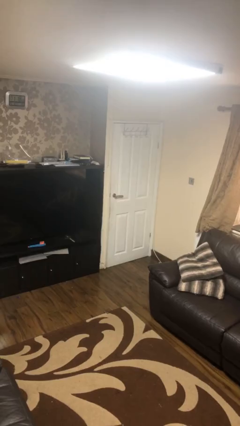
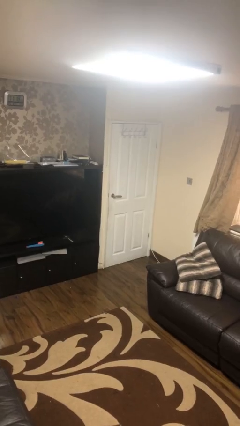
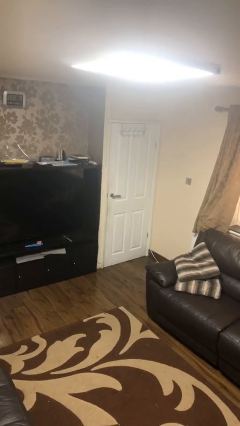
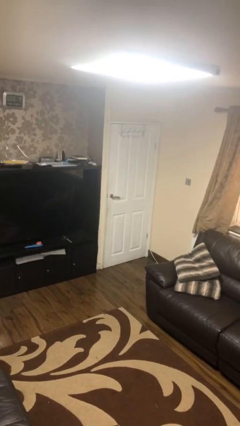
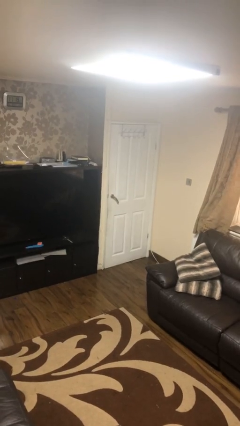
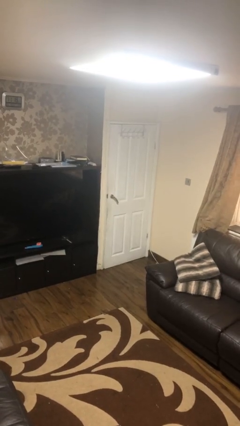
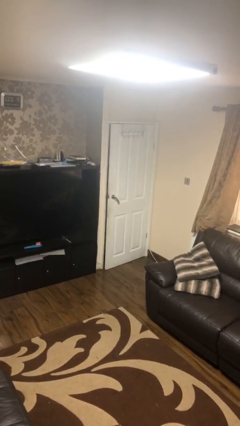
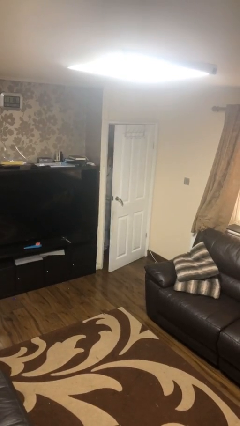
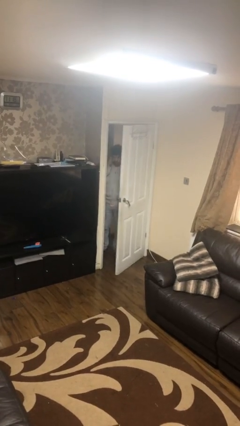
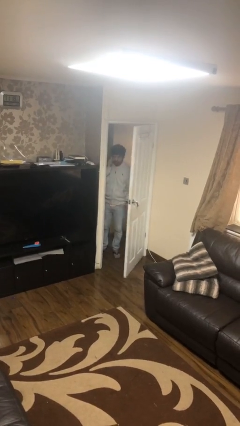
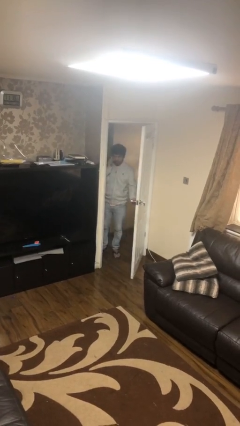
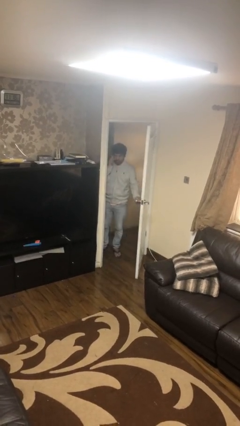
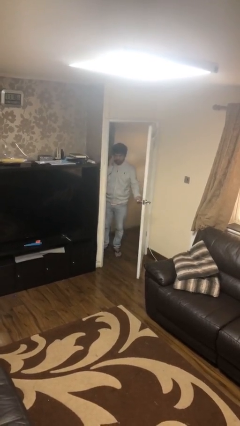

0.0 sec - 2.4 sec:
person opens facility door

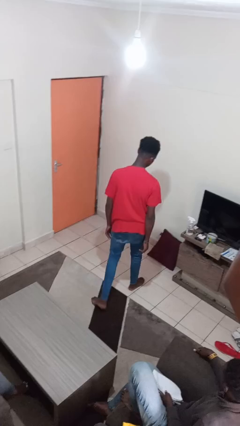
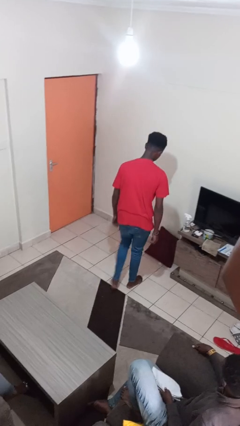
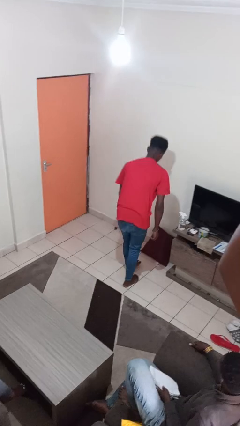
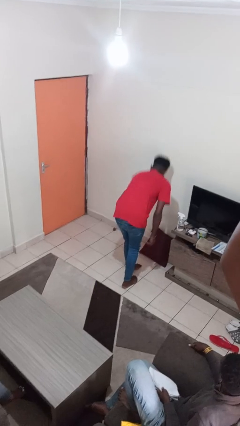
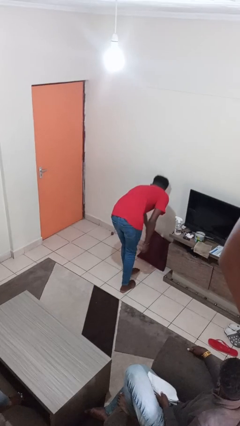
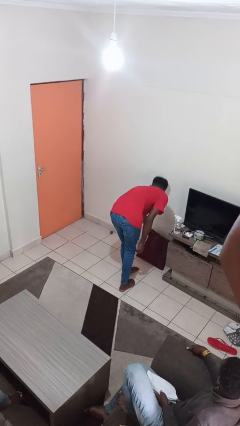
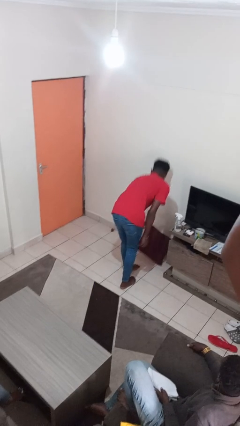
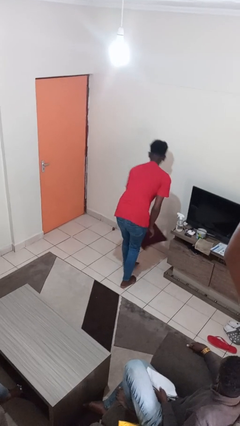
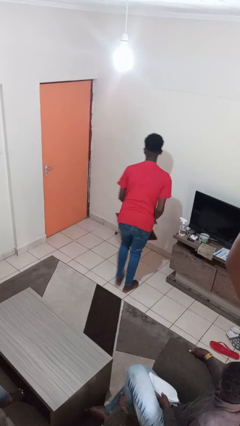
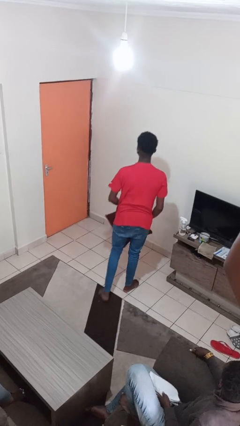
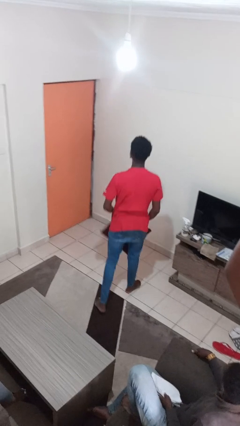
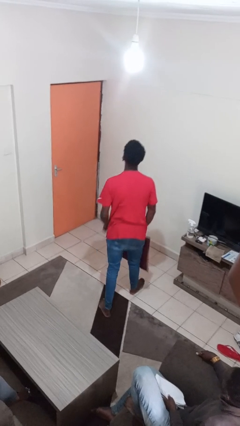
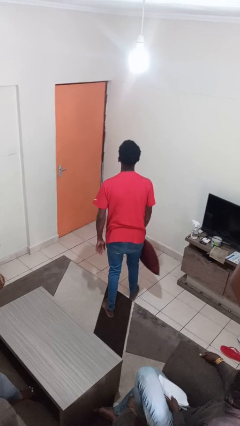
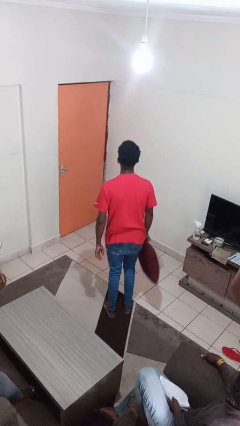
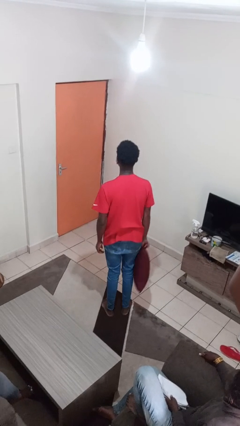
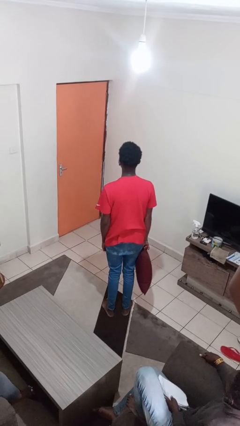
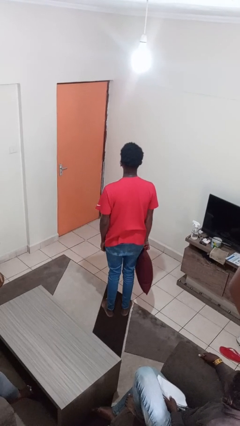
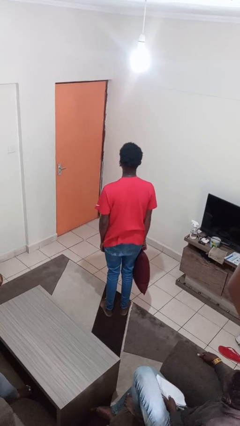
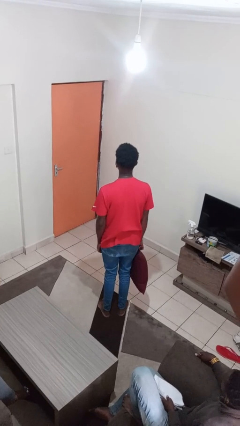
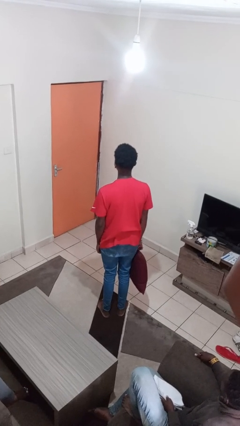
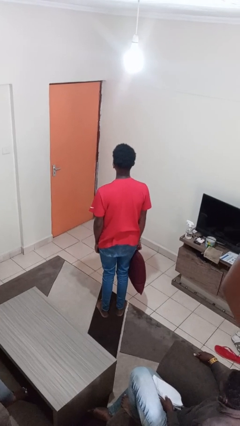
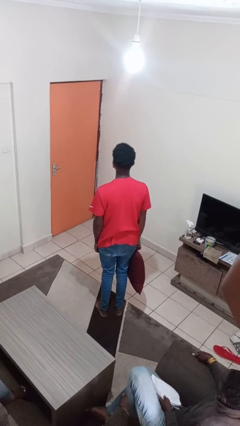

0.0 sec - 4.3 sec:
person picks up object from floor

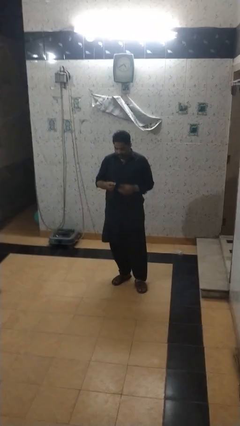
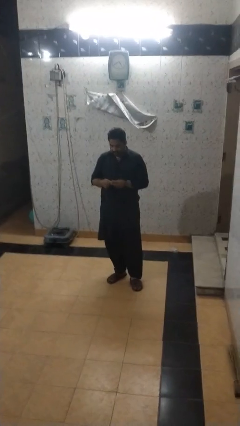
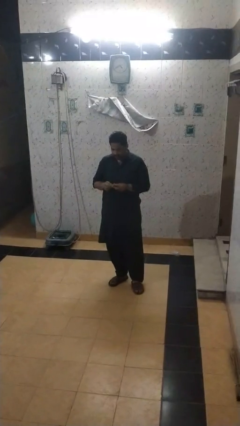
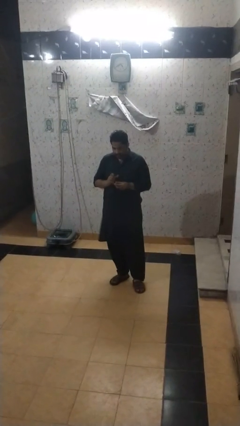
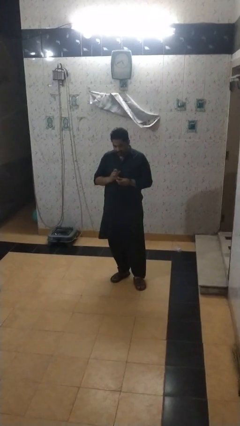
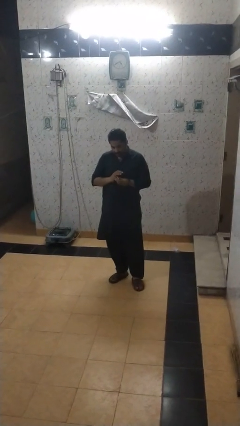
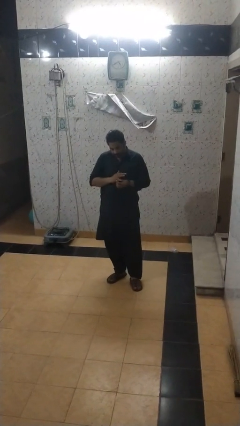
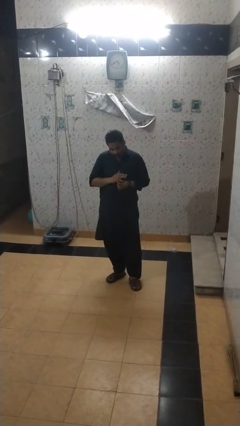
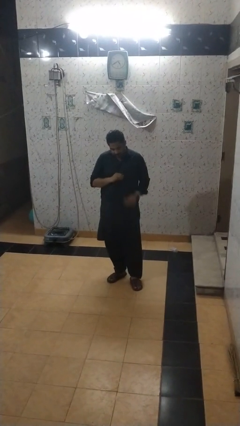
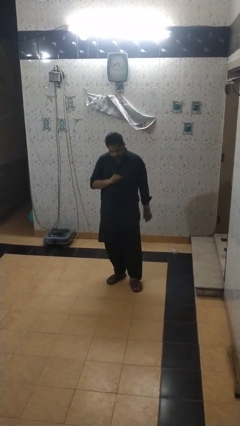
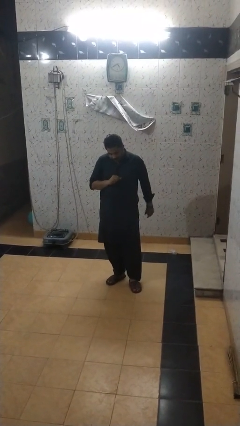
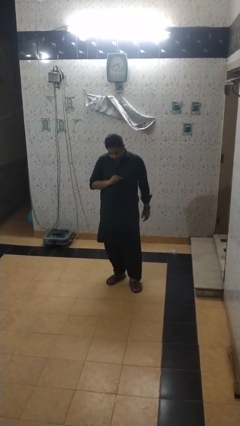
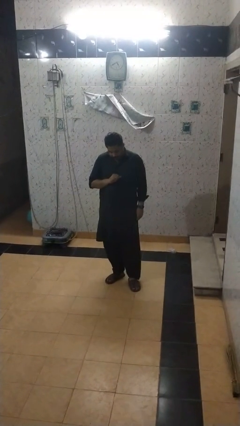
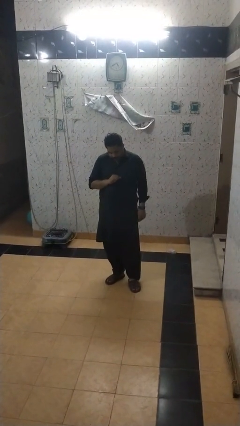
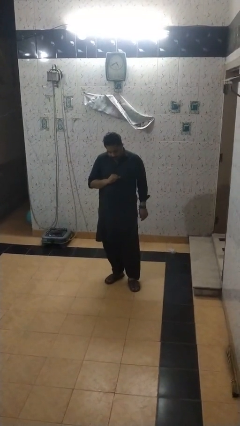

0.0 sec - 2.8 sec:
person puts on ring

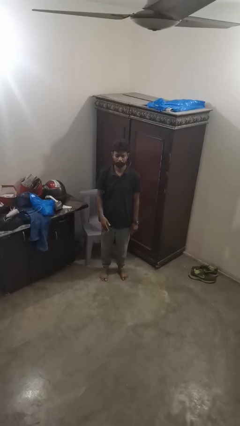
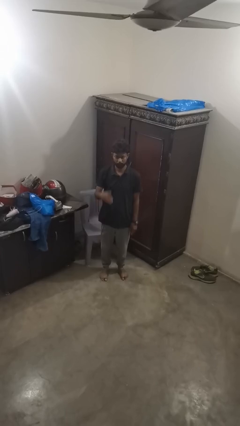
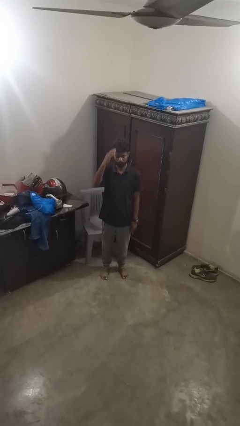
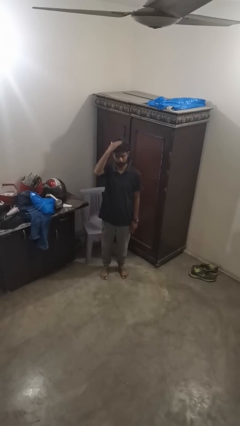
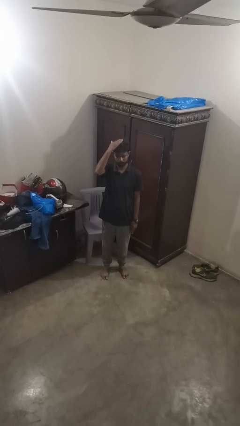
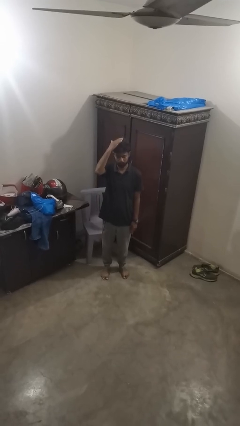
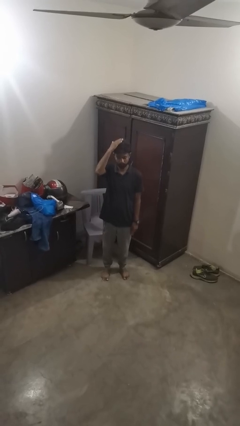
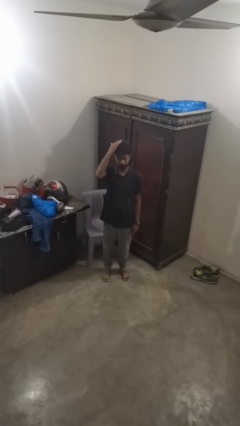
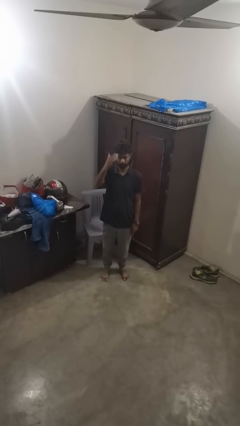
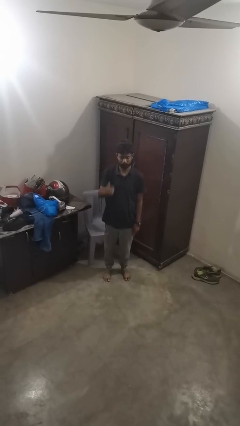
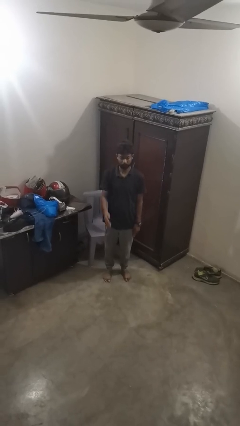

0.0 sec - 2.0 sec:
person pats head

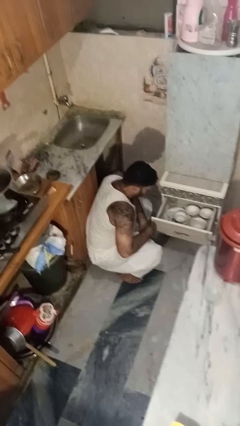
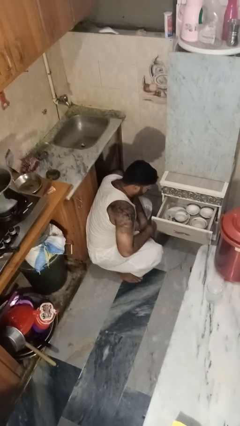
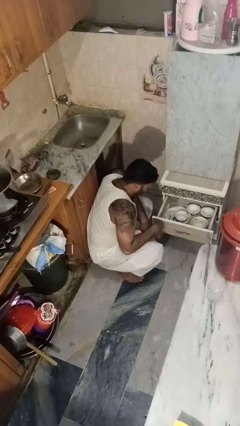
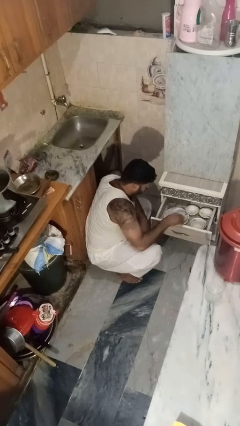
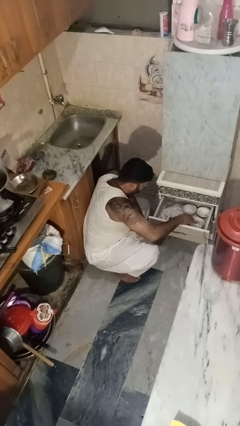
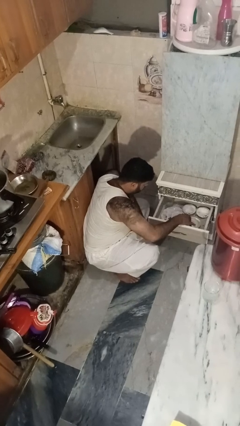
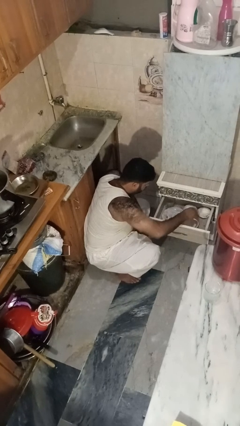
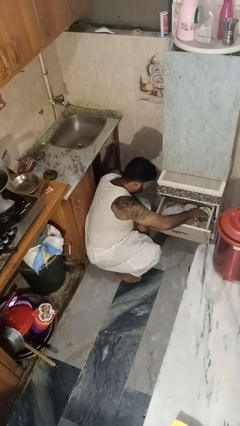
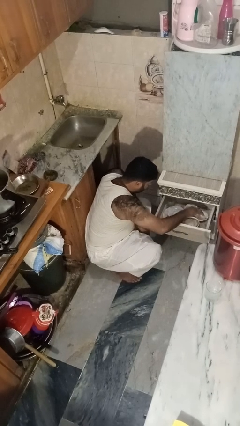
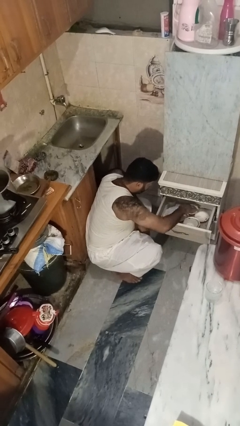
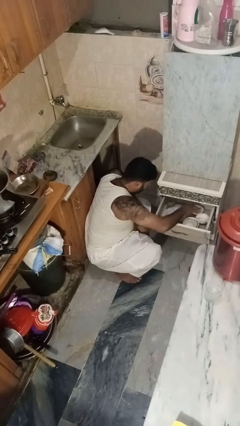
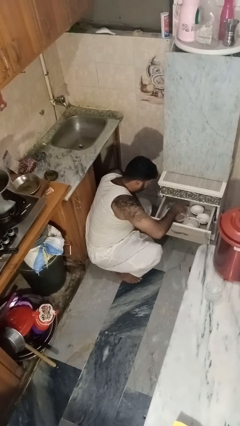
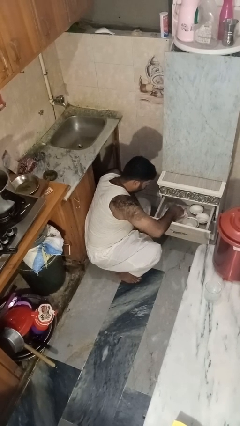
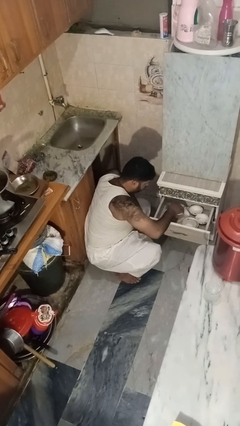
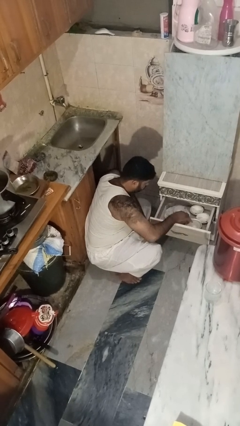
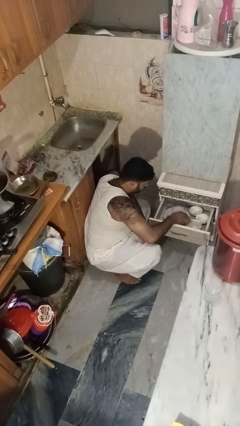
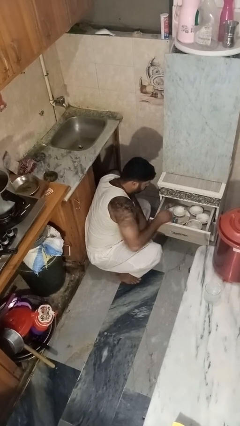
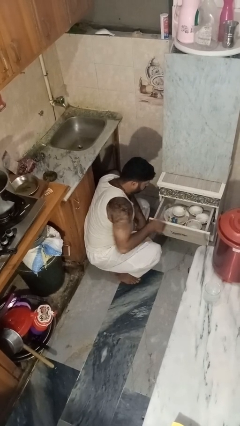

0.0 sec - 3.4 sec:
person searches in kitchen drawer

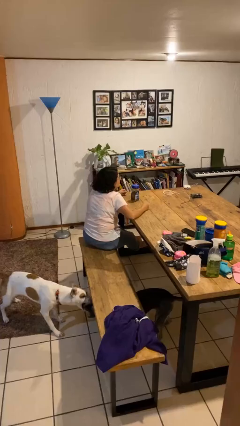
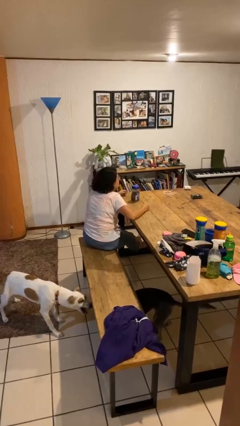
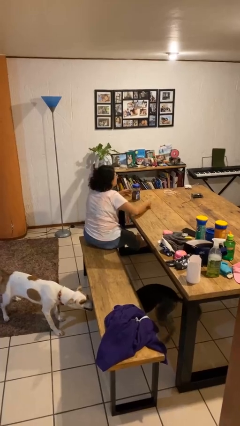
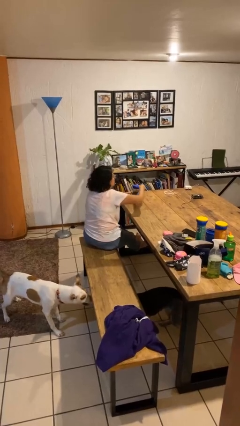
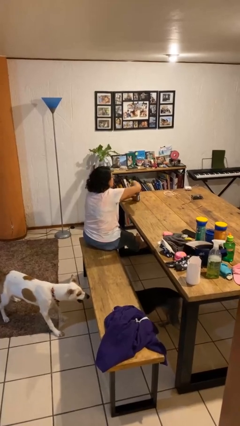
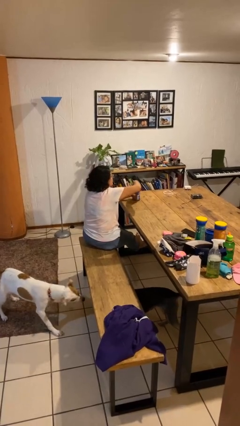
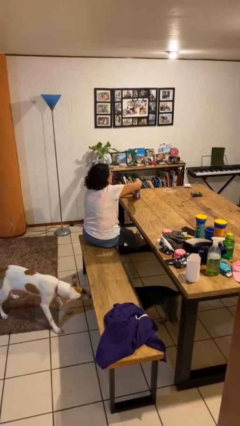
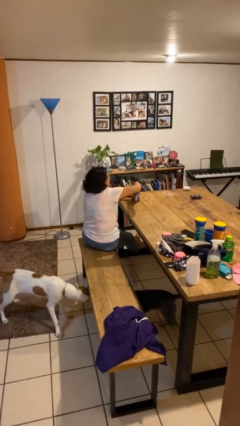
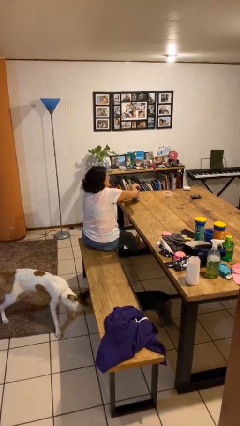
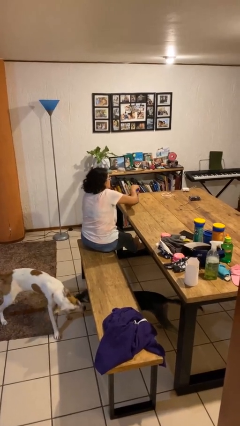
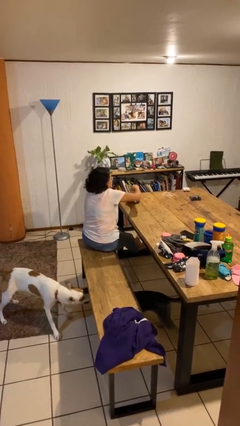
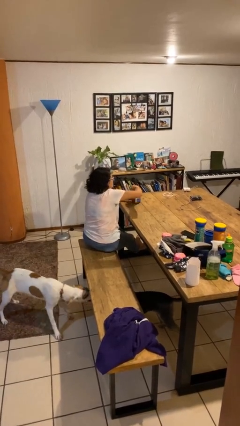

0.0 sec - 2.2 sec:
person opens jar

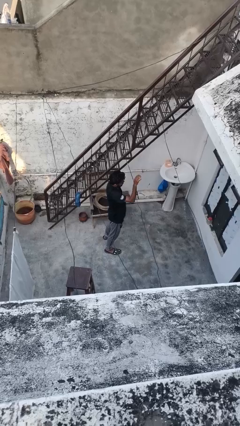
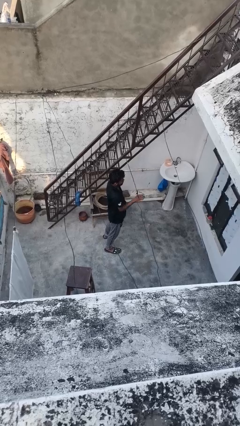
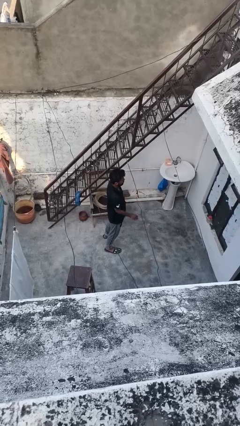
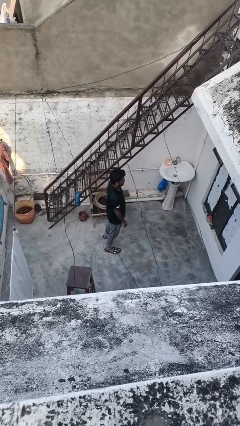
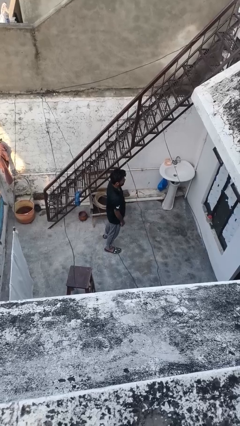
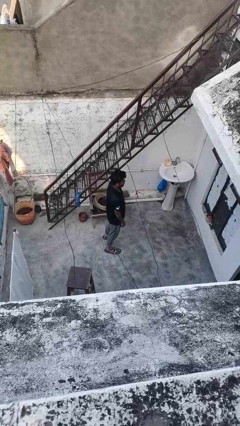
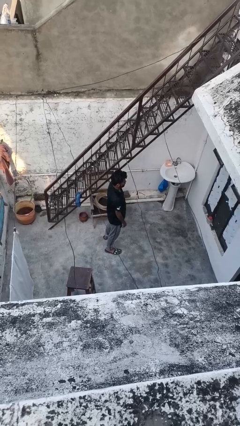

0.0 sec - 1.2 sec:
person gestures lower hand
